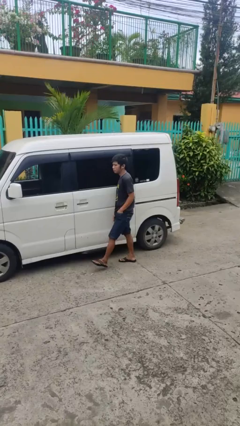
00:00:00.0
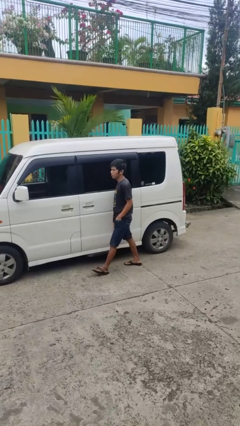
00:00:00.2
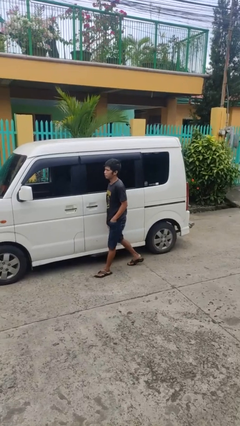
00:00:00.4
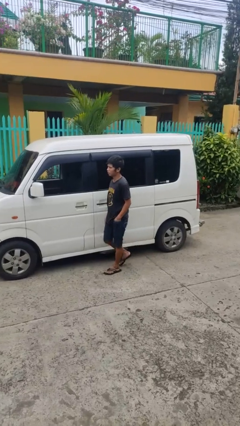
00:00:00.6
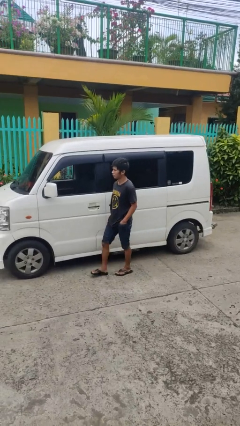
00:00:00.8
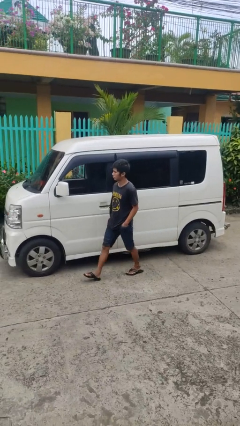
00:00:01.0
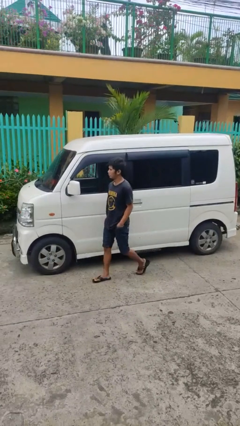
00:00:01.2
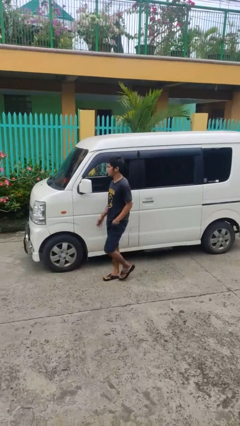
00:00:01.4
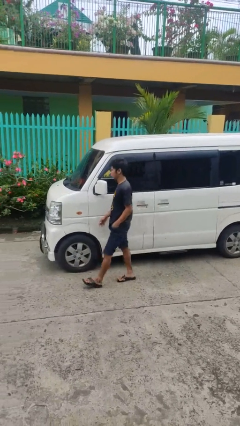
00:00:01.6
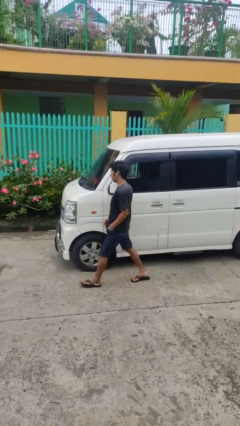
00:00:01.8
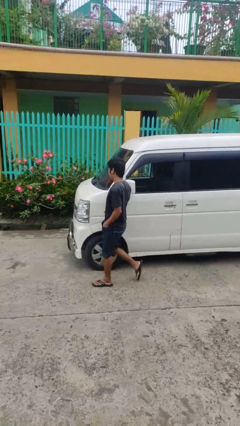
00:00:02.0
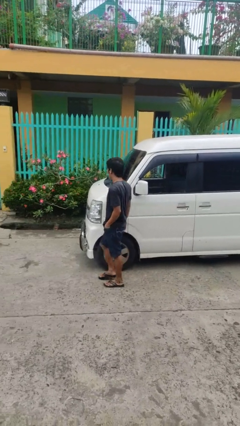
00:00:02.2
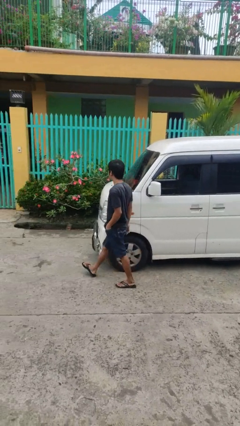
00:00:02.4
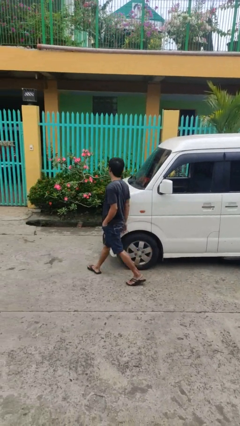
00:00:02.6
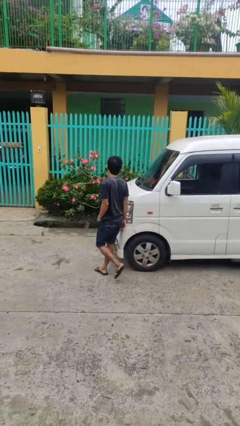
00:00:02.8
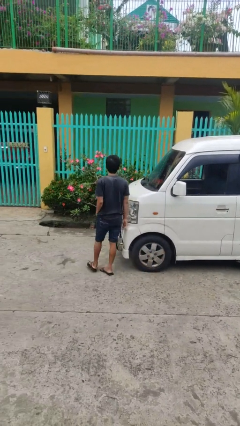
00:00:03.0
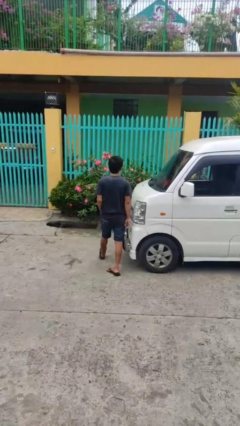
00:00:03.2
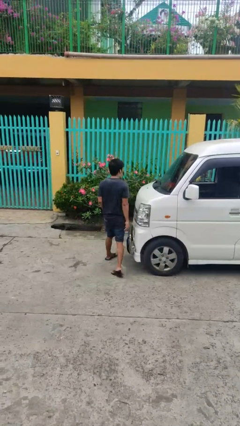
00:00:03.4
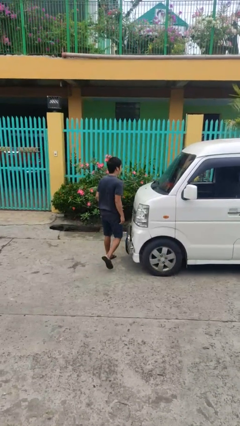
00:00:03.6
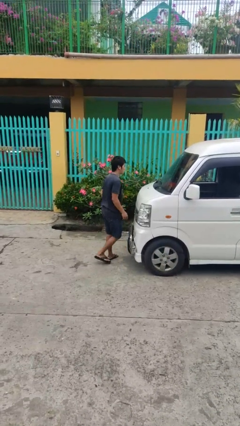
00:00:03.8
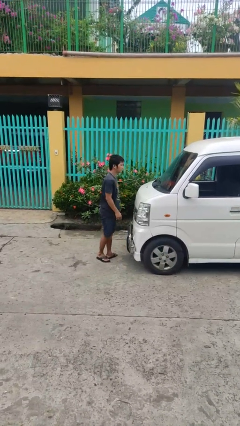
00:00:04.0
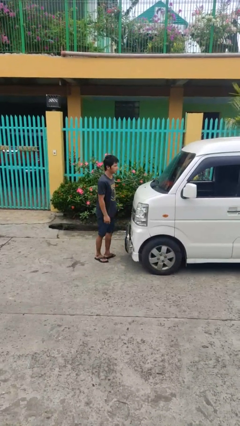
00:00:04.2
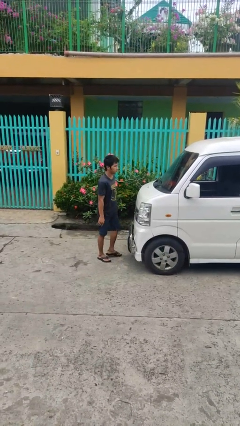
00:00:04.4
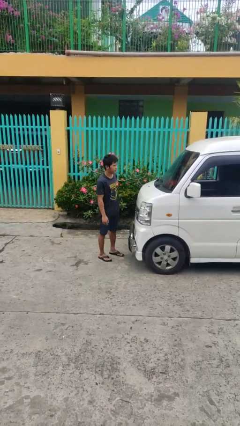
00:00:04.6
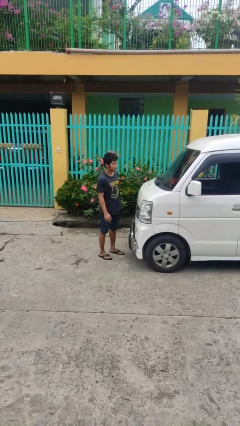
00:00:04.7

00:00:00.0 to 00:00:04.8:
person walks around car

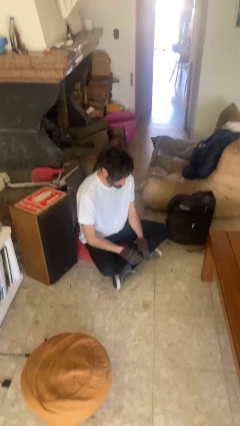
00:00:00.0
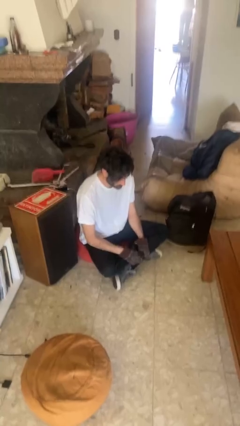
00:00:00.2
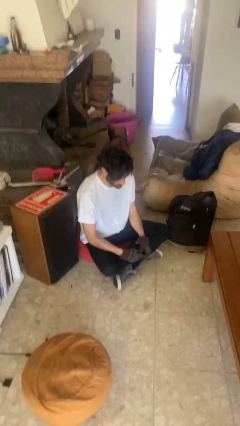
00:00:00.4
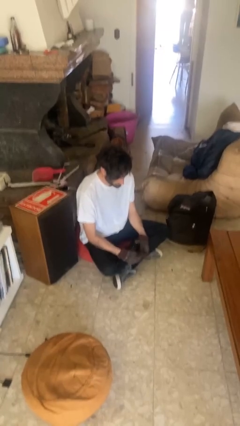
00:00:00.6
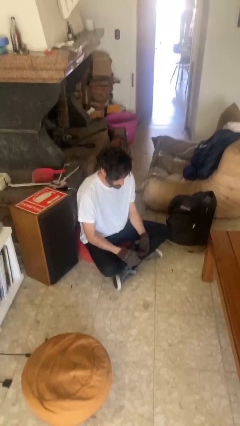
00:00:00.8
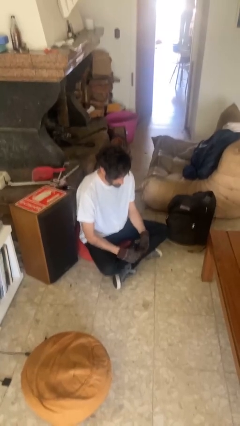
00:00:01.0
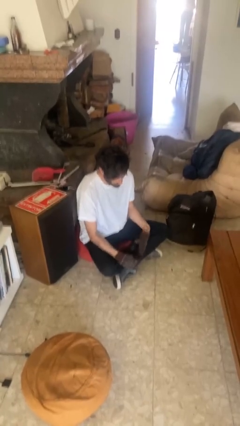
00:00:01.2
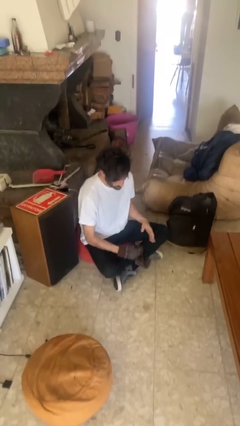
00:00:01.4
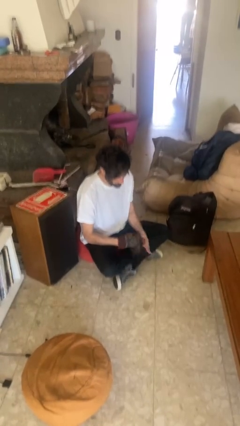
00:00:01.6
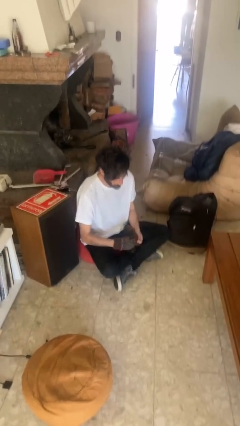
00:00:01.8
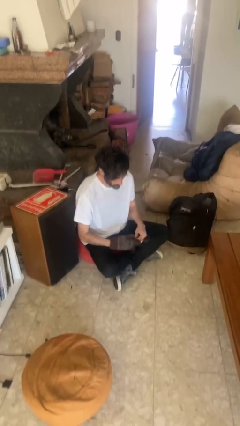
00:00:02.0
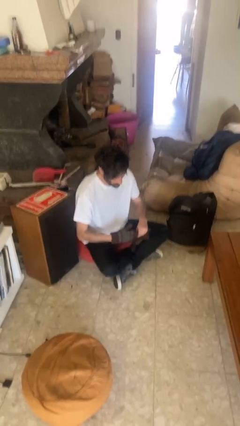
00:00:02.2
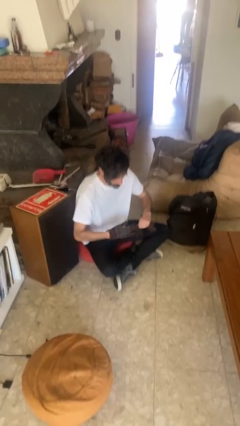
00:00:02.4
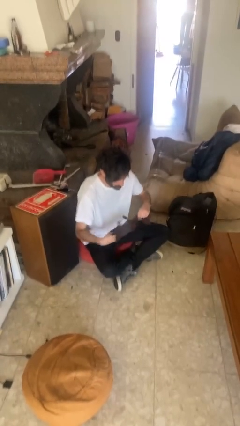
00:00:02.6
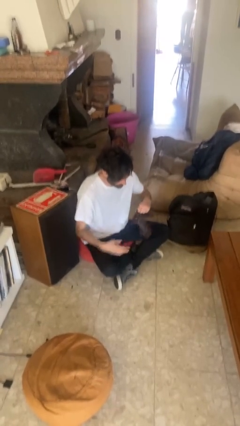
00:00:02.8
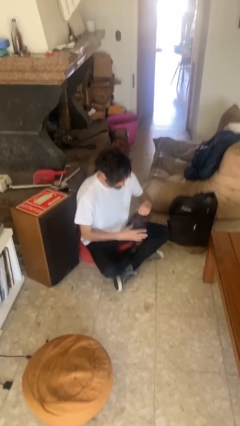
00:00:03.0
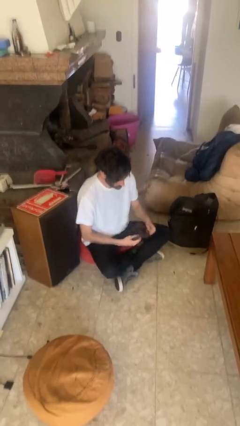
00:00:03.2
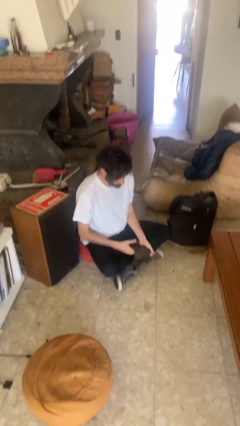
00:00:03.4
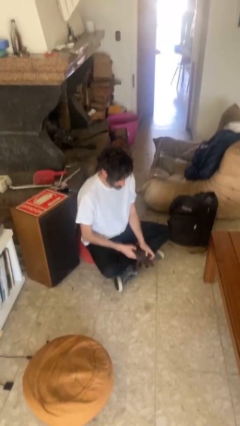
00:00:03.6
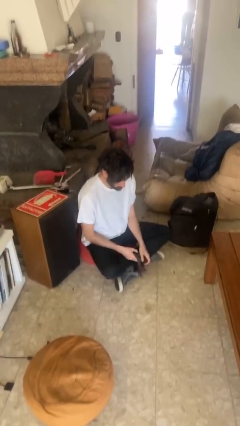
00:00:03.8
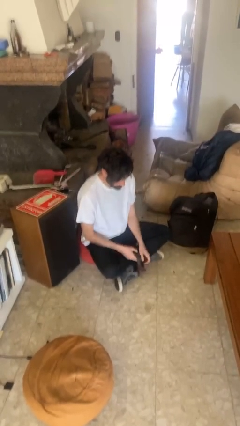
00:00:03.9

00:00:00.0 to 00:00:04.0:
person takes off gloves

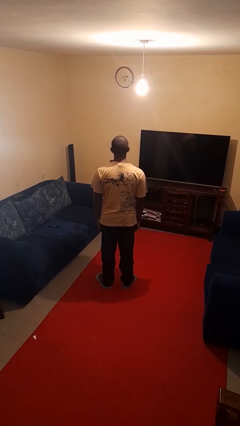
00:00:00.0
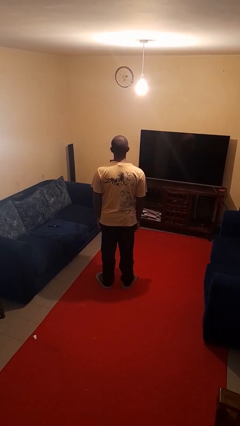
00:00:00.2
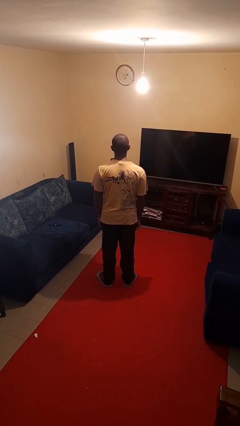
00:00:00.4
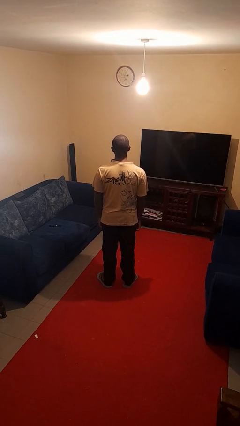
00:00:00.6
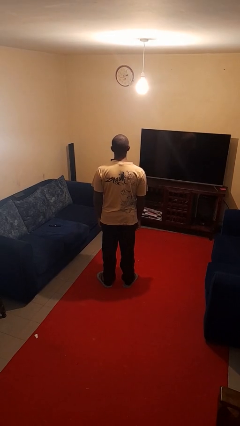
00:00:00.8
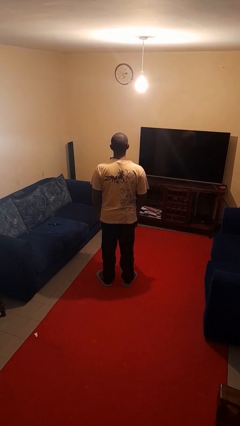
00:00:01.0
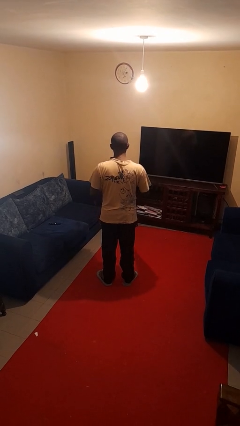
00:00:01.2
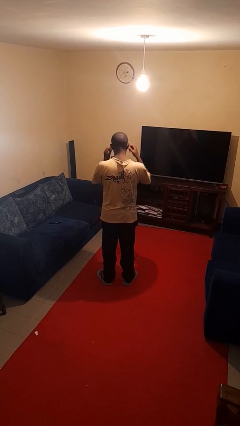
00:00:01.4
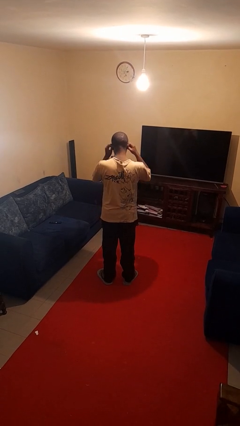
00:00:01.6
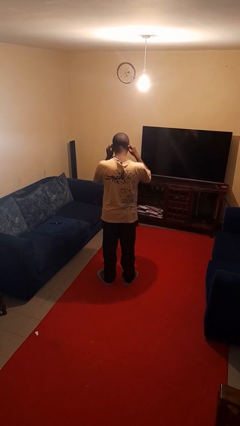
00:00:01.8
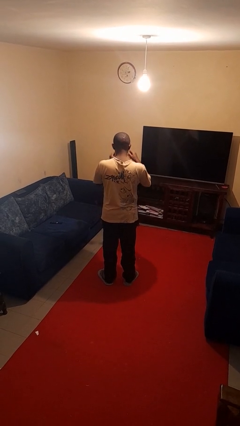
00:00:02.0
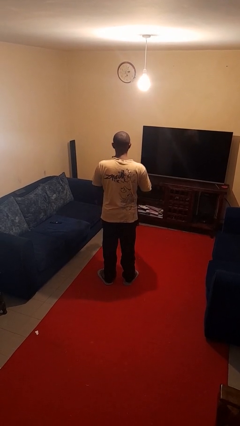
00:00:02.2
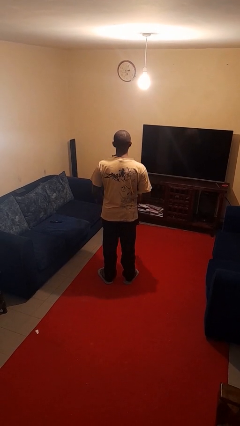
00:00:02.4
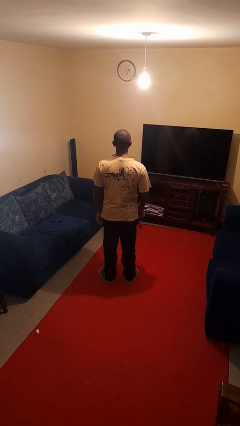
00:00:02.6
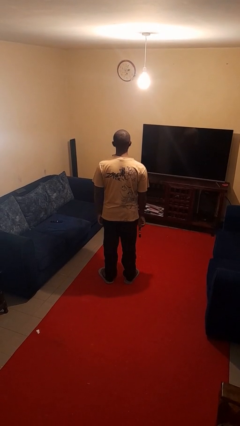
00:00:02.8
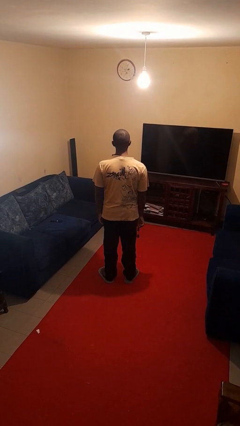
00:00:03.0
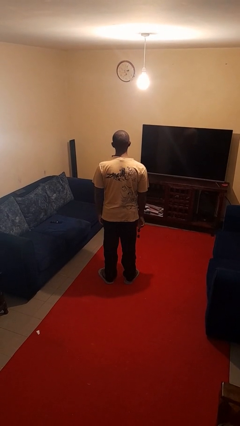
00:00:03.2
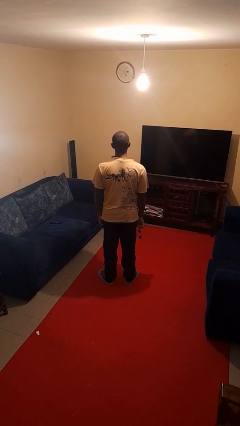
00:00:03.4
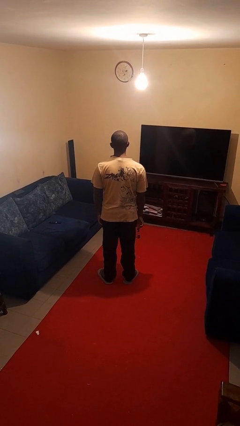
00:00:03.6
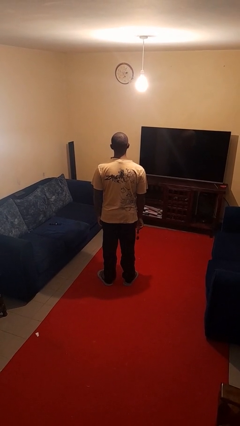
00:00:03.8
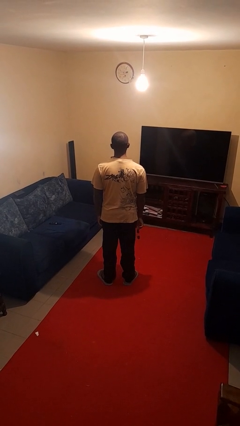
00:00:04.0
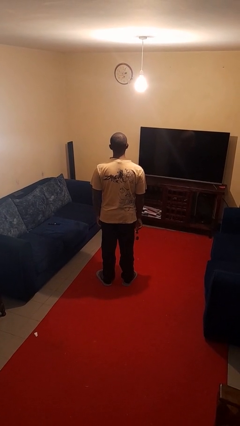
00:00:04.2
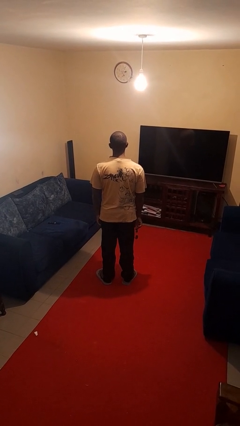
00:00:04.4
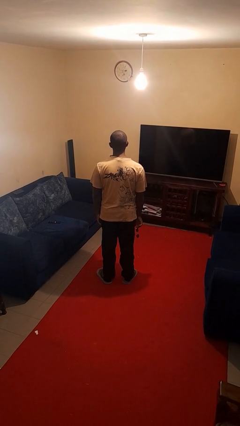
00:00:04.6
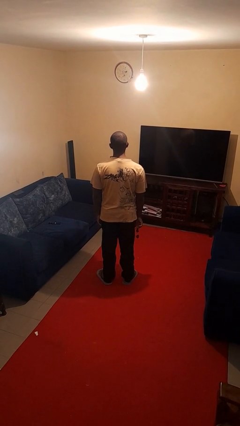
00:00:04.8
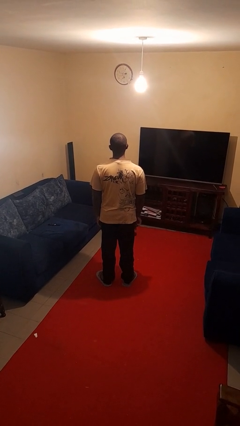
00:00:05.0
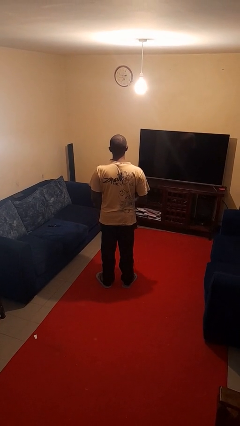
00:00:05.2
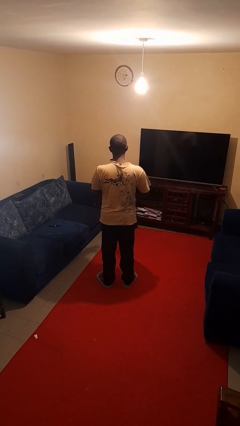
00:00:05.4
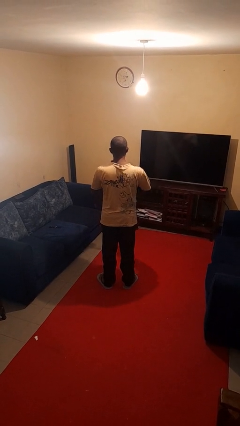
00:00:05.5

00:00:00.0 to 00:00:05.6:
person takes off sunglasses

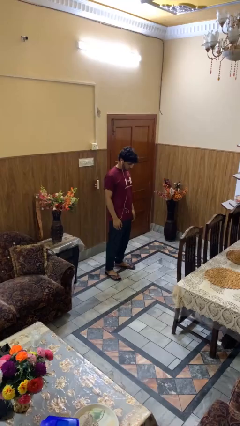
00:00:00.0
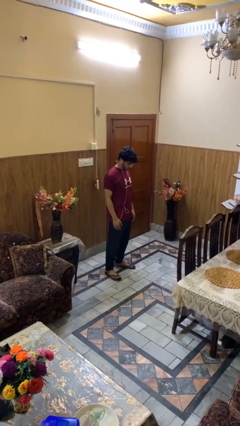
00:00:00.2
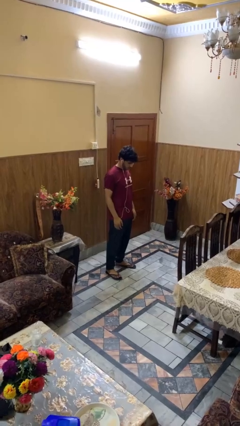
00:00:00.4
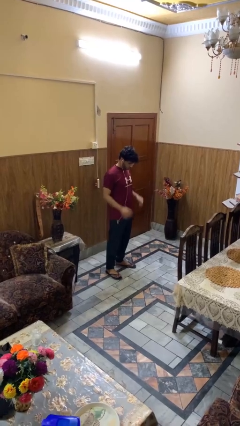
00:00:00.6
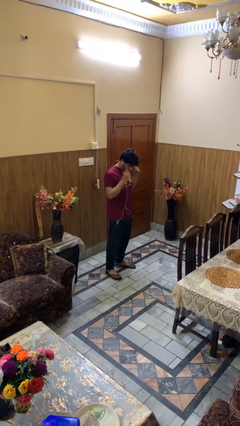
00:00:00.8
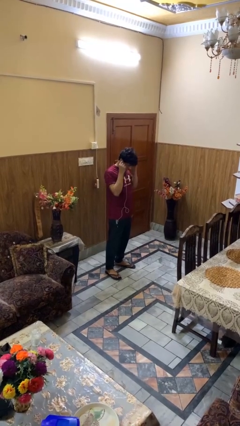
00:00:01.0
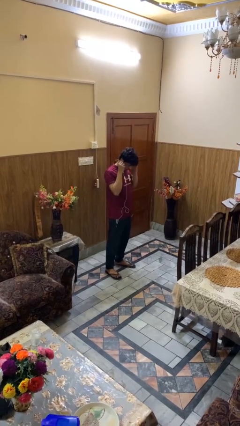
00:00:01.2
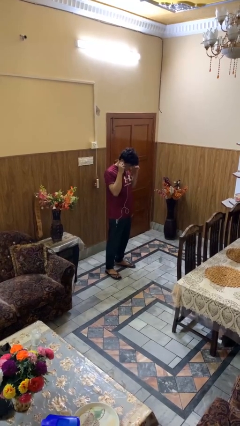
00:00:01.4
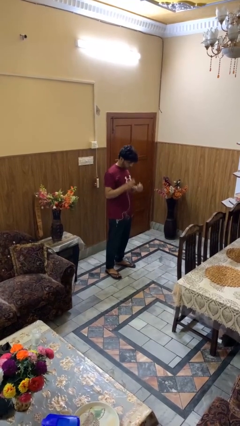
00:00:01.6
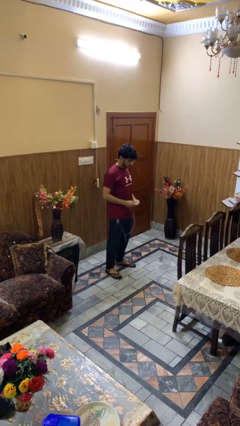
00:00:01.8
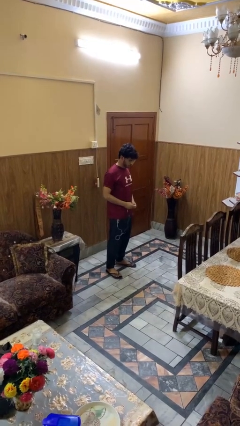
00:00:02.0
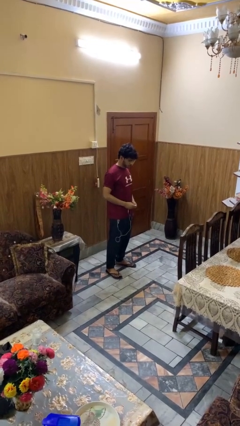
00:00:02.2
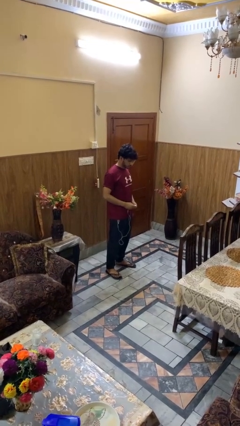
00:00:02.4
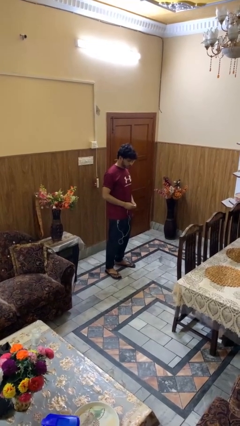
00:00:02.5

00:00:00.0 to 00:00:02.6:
person takes off glasses

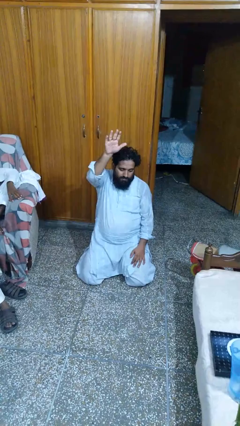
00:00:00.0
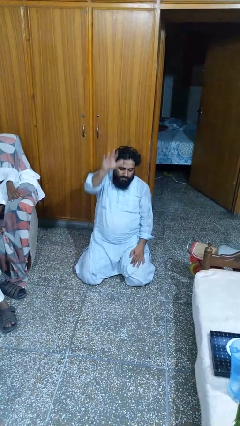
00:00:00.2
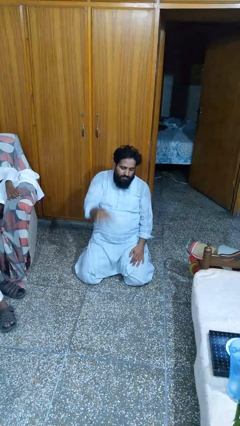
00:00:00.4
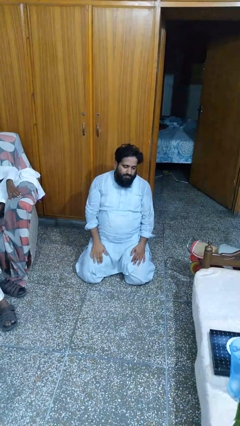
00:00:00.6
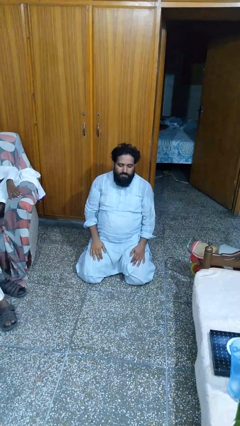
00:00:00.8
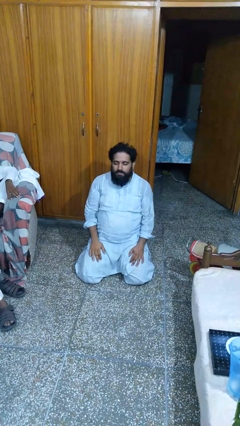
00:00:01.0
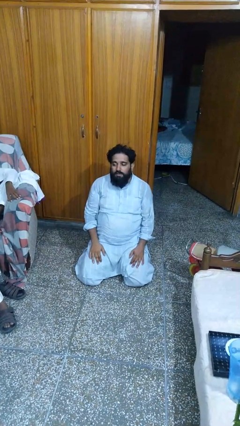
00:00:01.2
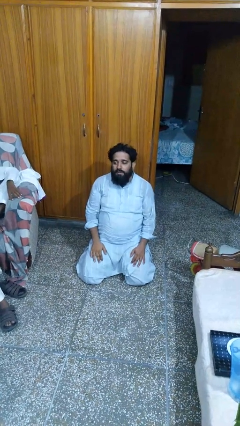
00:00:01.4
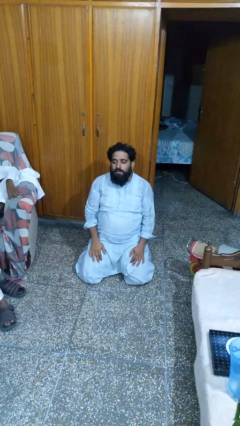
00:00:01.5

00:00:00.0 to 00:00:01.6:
person gestures lower hand
